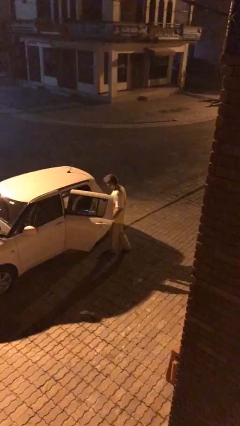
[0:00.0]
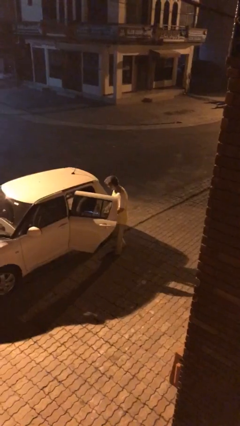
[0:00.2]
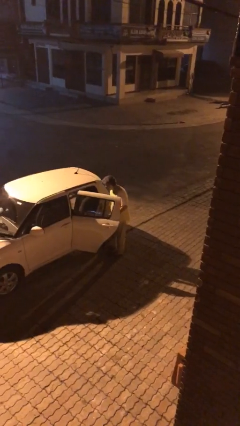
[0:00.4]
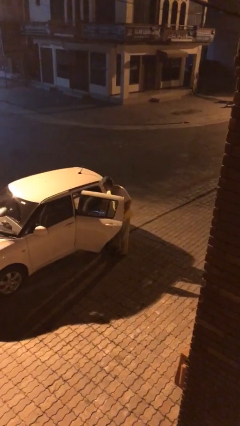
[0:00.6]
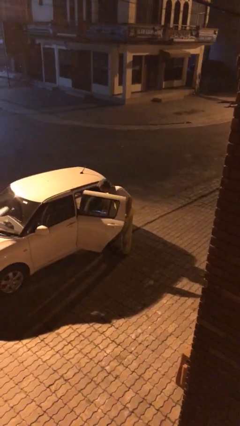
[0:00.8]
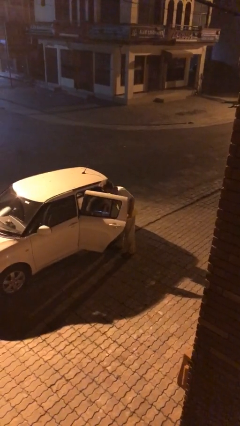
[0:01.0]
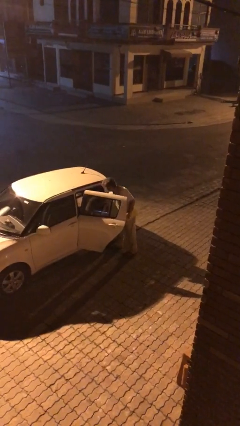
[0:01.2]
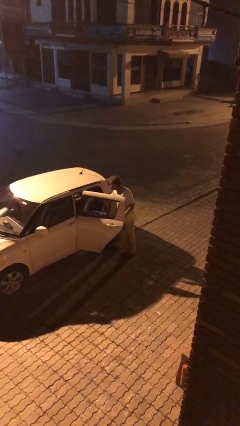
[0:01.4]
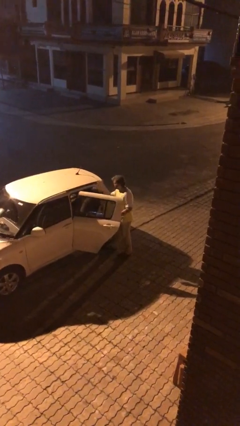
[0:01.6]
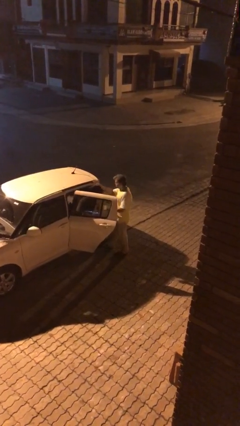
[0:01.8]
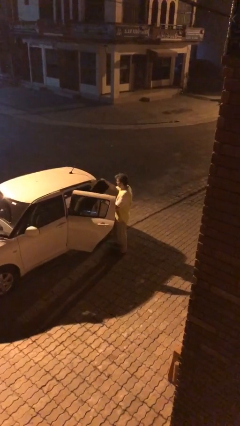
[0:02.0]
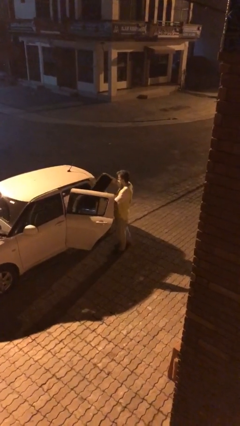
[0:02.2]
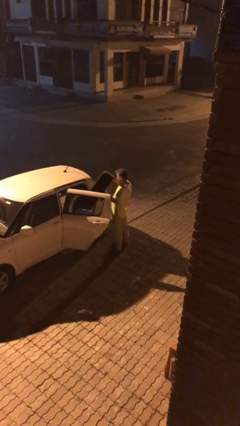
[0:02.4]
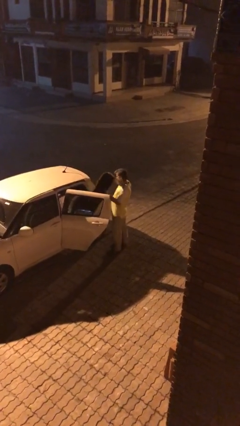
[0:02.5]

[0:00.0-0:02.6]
person unloads car

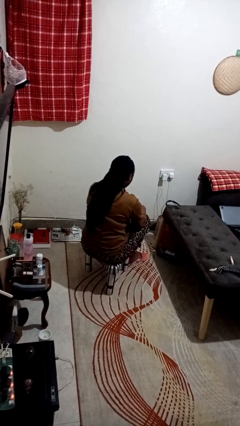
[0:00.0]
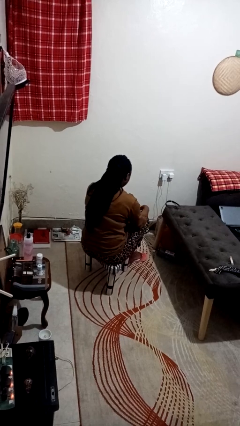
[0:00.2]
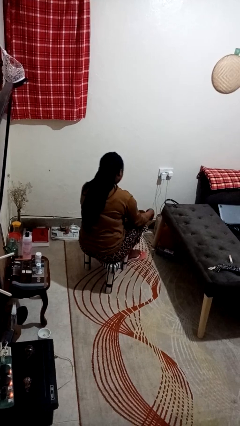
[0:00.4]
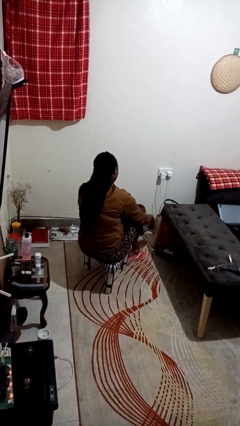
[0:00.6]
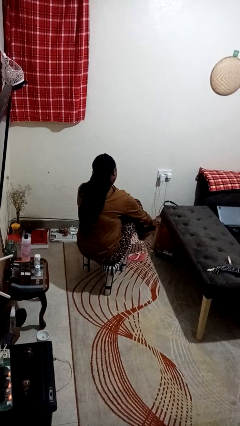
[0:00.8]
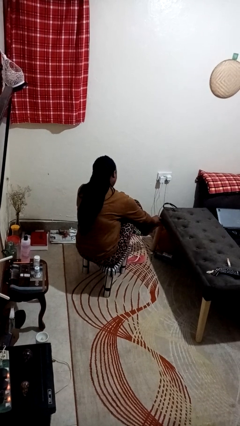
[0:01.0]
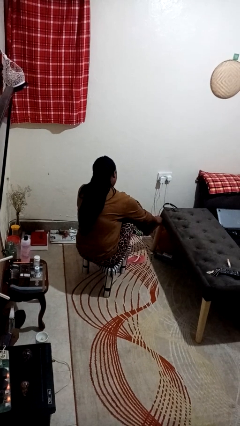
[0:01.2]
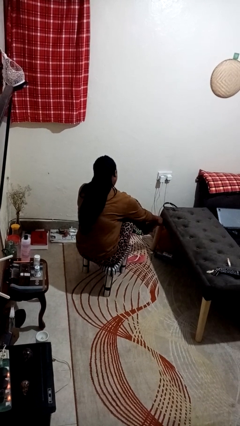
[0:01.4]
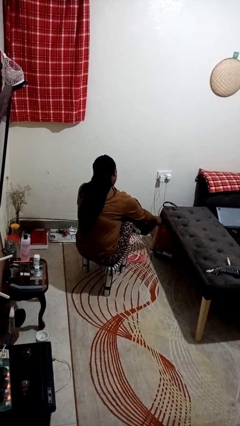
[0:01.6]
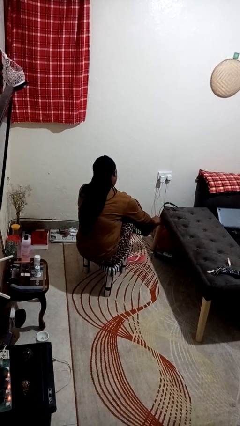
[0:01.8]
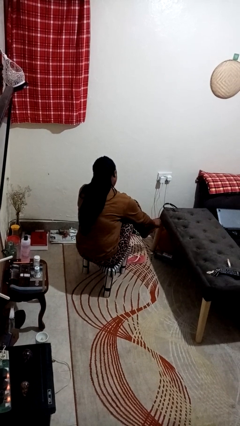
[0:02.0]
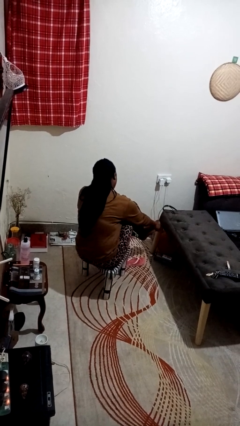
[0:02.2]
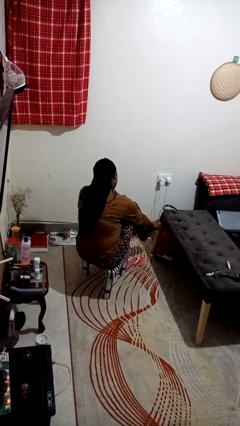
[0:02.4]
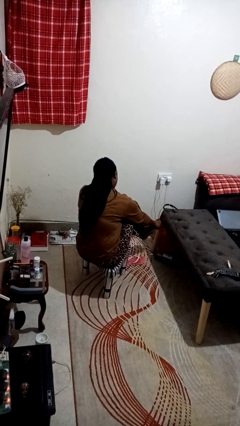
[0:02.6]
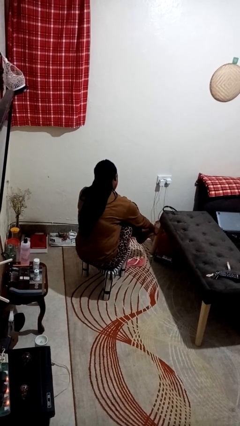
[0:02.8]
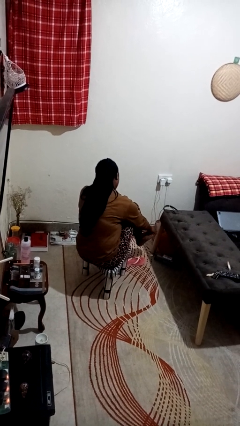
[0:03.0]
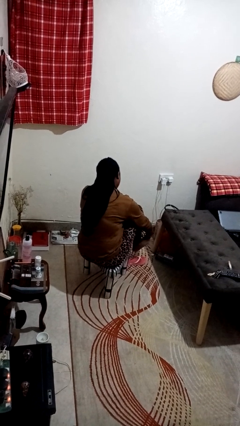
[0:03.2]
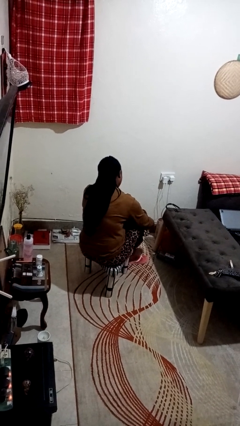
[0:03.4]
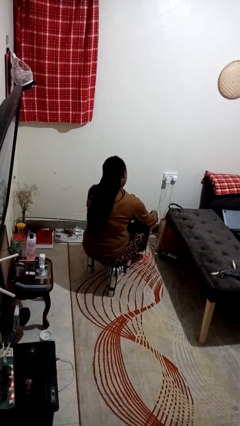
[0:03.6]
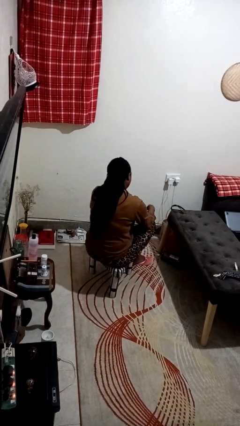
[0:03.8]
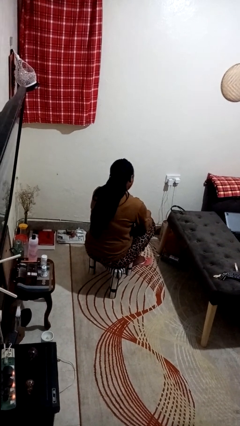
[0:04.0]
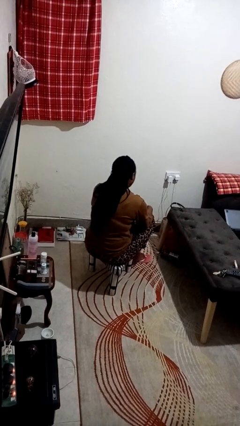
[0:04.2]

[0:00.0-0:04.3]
person rubs foot

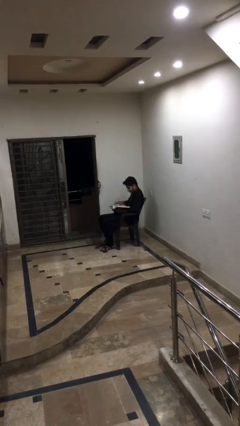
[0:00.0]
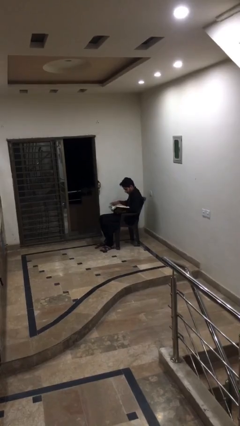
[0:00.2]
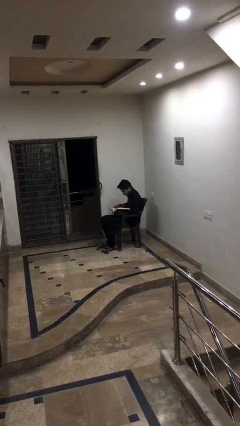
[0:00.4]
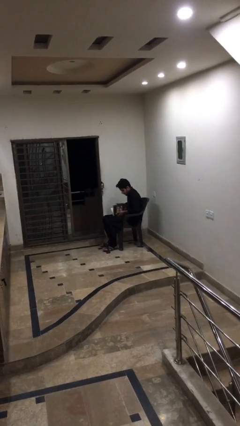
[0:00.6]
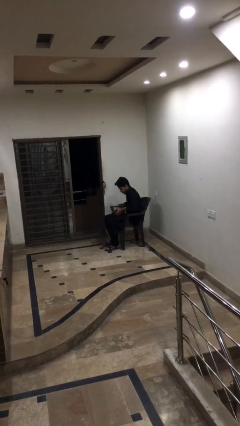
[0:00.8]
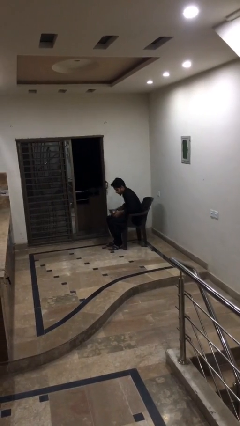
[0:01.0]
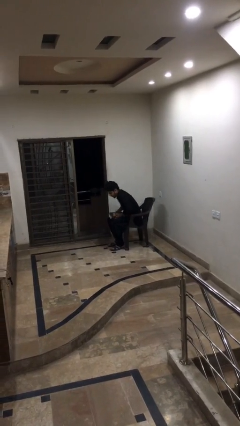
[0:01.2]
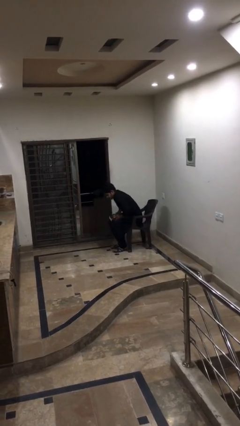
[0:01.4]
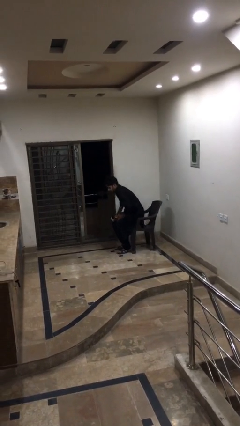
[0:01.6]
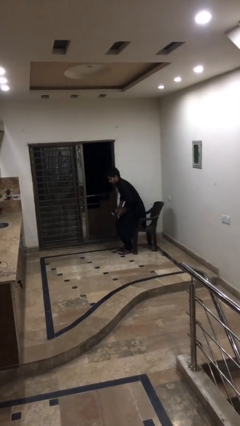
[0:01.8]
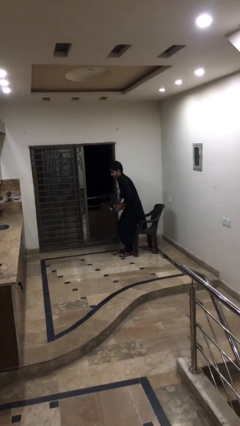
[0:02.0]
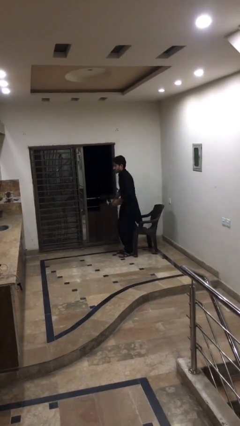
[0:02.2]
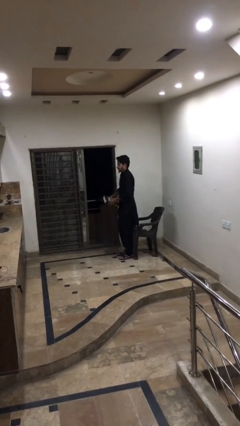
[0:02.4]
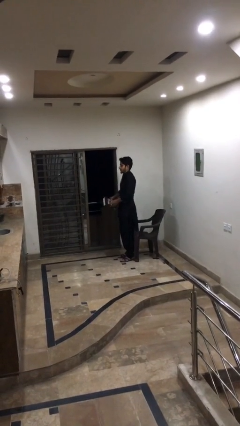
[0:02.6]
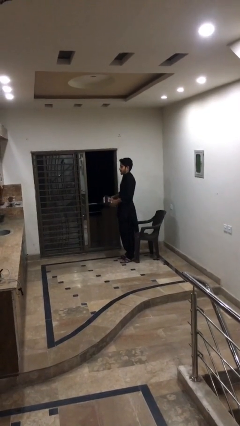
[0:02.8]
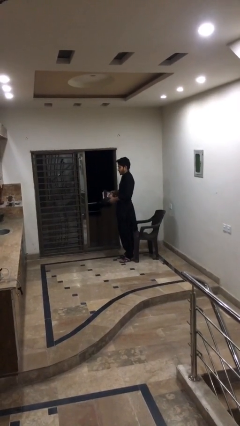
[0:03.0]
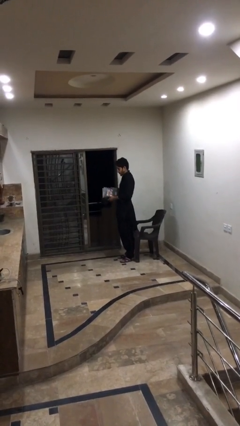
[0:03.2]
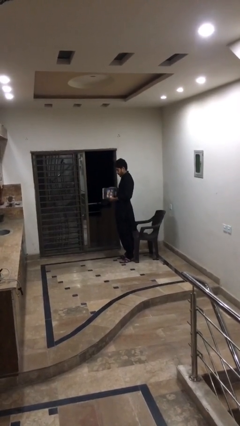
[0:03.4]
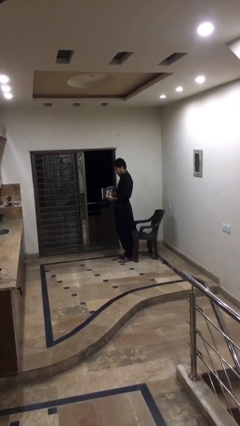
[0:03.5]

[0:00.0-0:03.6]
person stands up

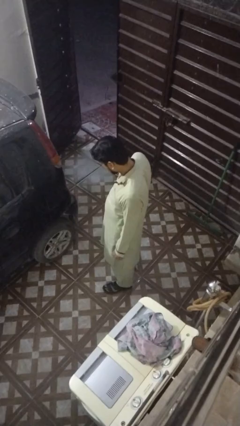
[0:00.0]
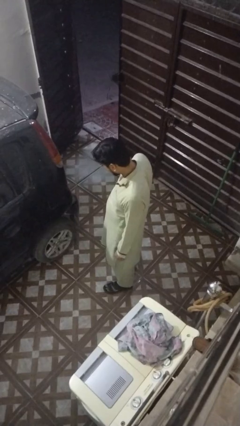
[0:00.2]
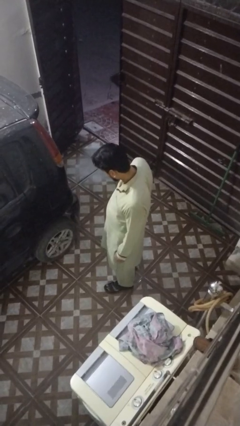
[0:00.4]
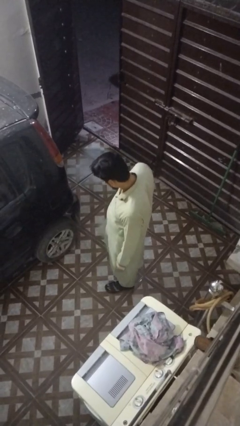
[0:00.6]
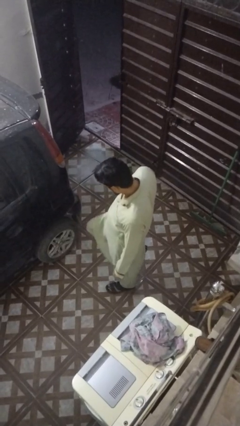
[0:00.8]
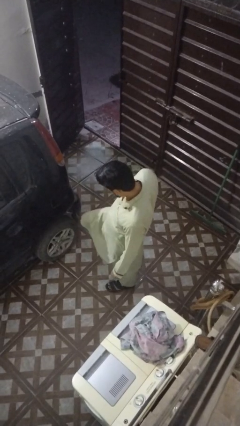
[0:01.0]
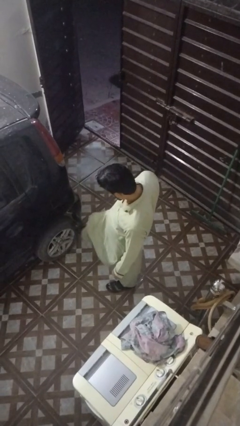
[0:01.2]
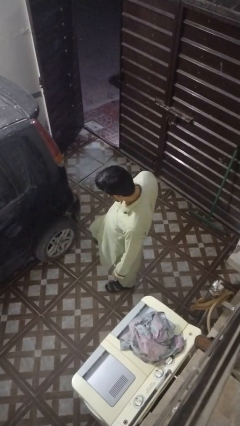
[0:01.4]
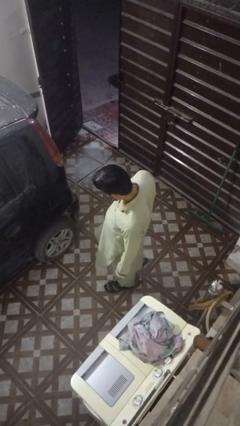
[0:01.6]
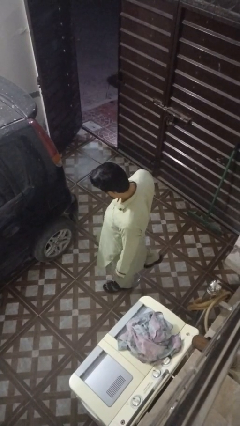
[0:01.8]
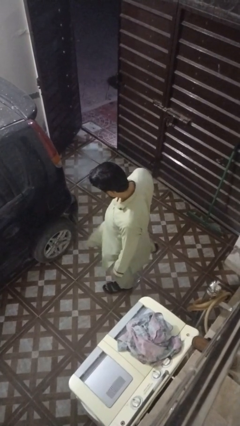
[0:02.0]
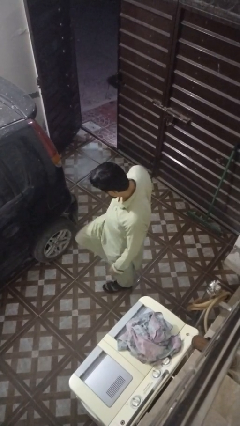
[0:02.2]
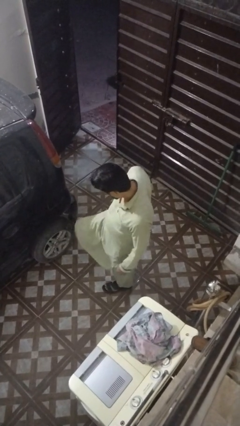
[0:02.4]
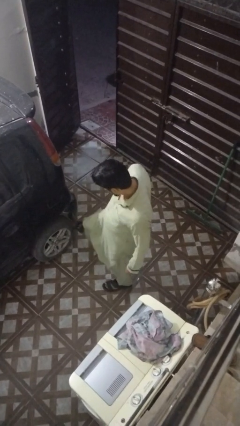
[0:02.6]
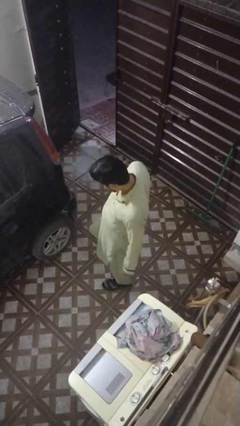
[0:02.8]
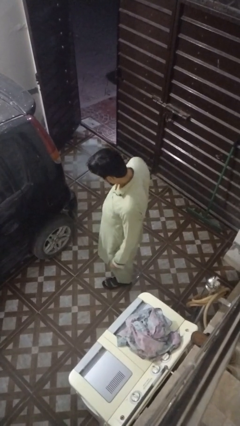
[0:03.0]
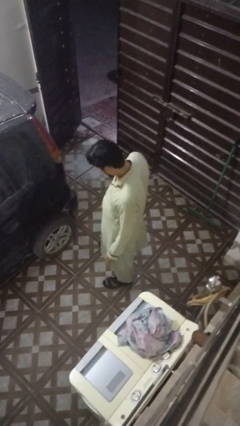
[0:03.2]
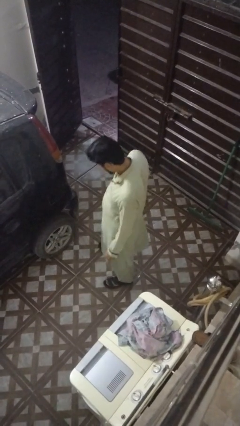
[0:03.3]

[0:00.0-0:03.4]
person kicks car tires

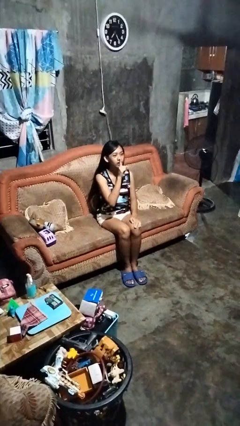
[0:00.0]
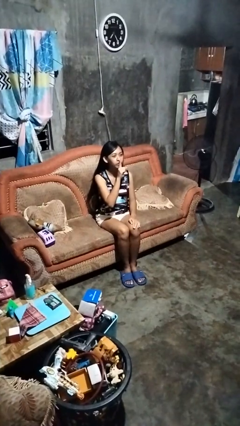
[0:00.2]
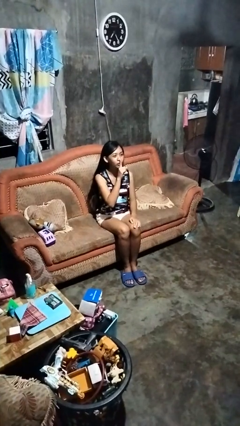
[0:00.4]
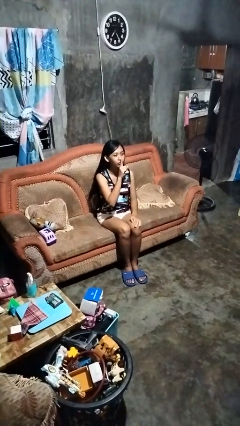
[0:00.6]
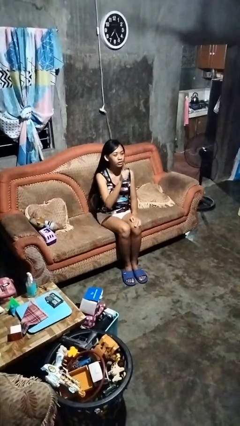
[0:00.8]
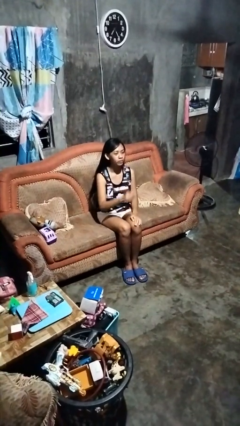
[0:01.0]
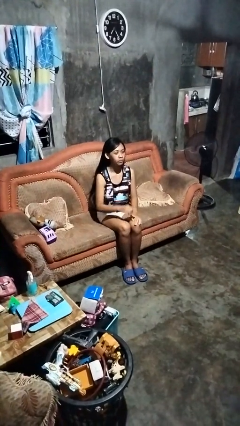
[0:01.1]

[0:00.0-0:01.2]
person gestures be quiet

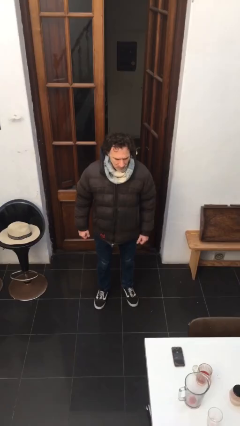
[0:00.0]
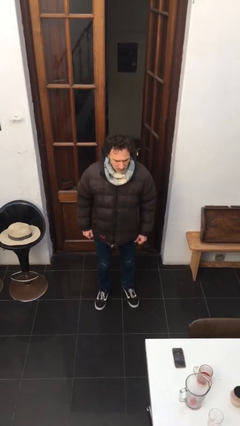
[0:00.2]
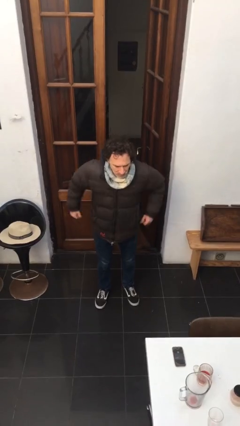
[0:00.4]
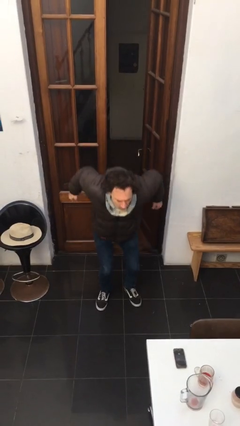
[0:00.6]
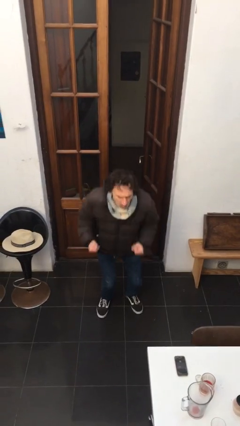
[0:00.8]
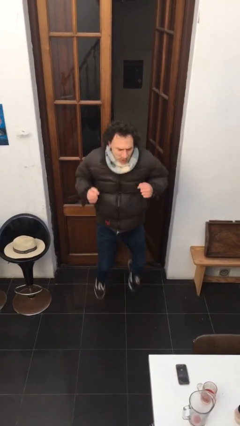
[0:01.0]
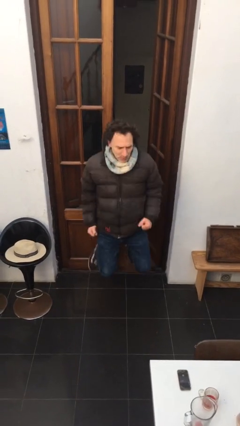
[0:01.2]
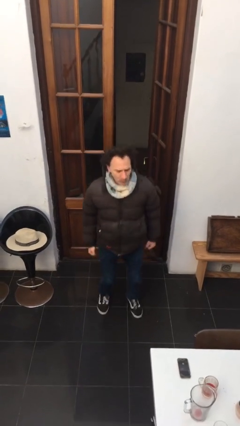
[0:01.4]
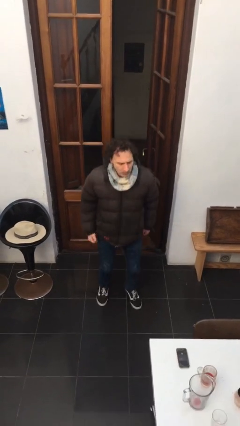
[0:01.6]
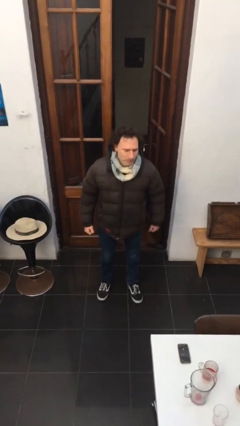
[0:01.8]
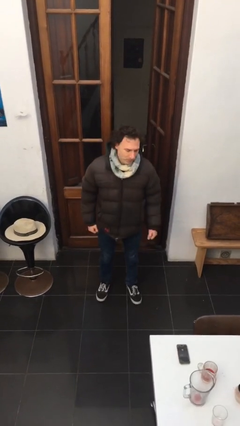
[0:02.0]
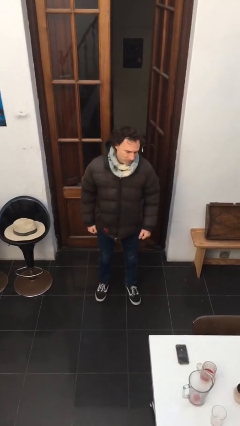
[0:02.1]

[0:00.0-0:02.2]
person jumps
